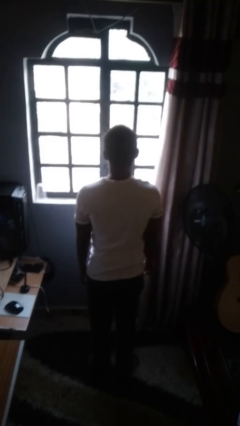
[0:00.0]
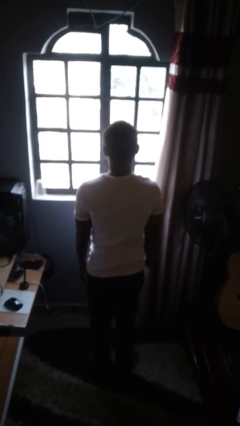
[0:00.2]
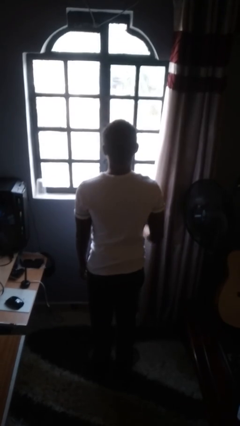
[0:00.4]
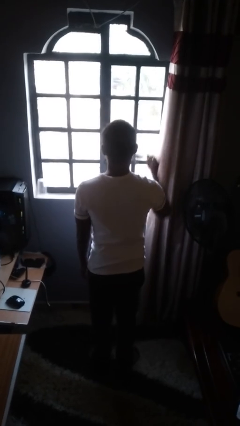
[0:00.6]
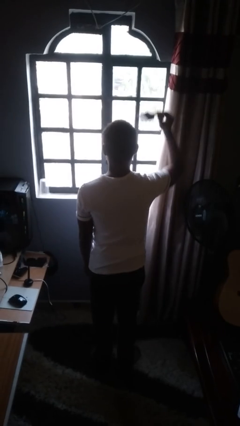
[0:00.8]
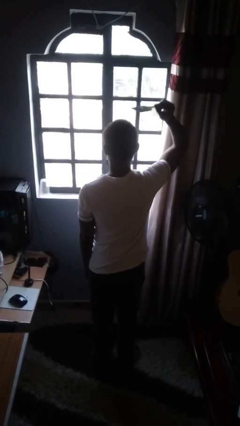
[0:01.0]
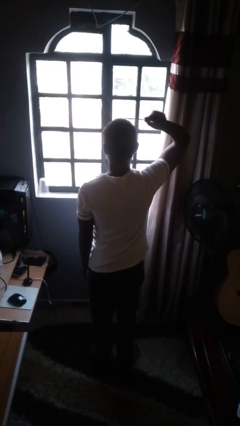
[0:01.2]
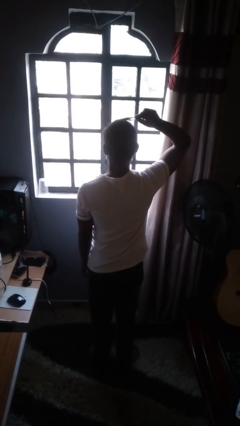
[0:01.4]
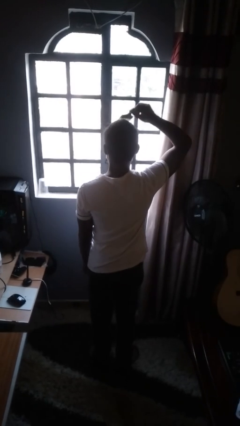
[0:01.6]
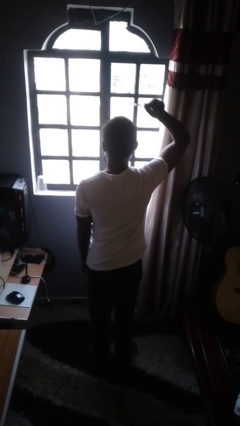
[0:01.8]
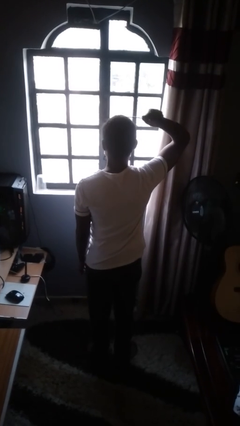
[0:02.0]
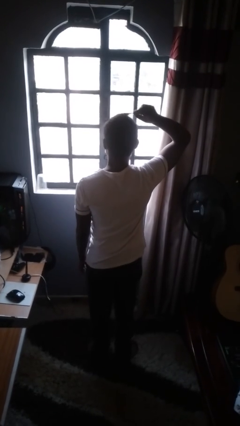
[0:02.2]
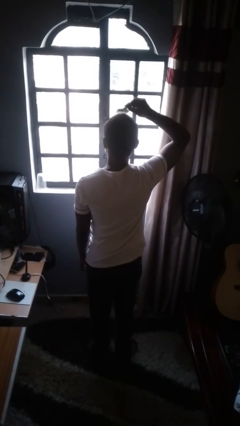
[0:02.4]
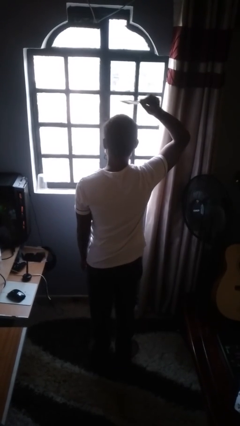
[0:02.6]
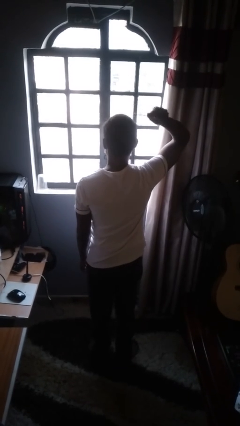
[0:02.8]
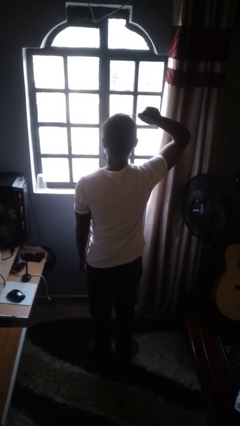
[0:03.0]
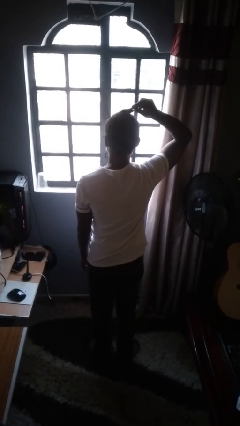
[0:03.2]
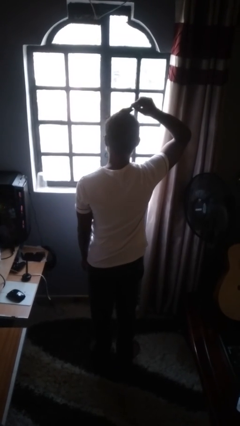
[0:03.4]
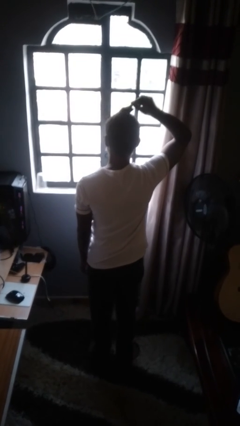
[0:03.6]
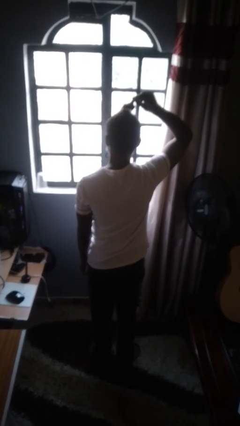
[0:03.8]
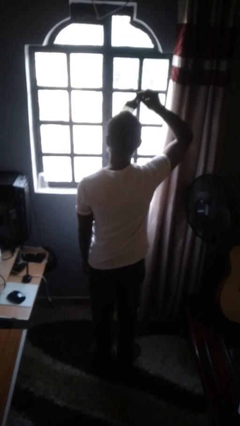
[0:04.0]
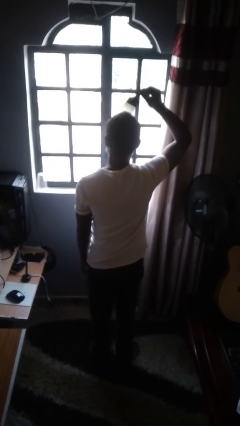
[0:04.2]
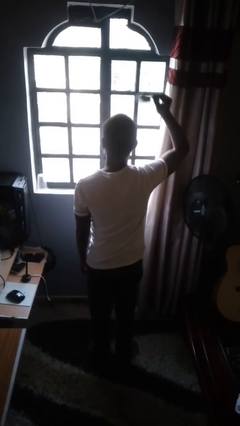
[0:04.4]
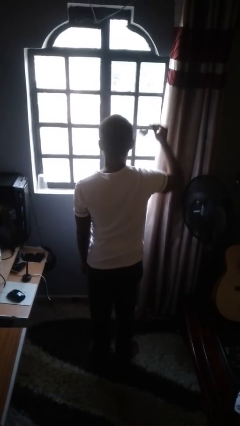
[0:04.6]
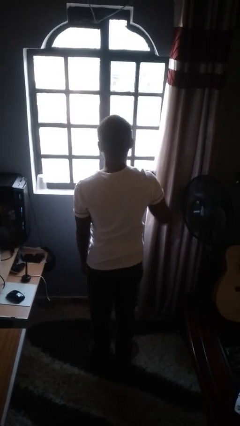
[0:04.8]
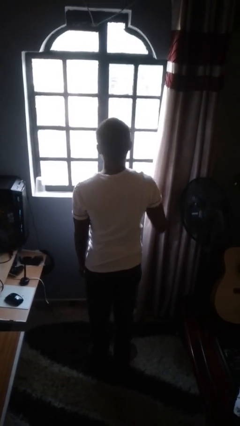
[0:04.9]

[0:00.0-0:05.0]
person brushes hair

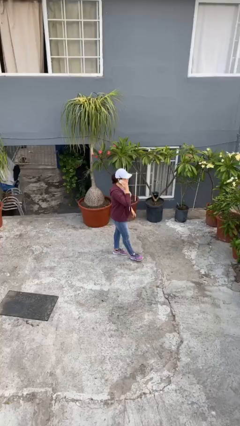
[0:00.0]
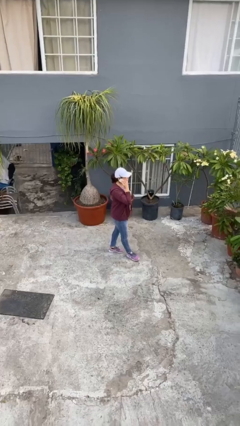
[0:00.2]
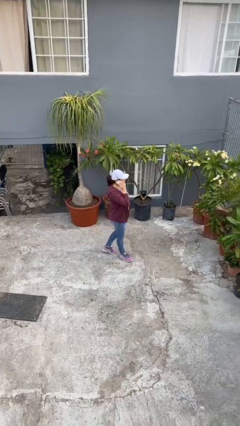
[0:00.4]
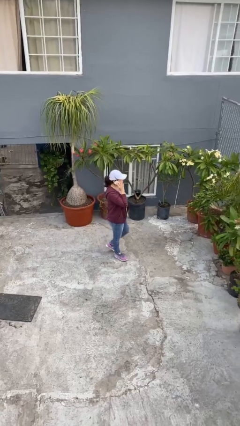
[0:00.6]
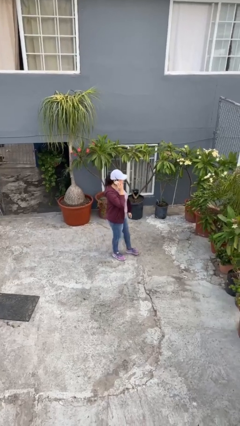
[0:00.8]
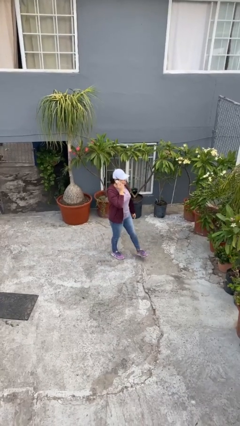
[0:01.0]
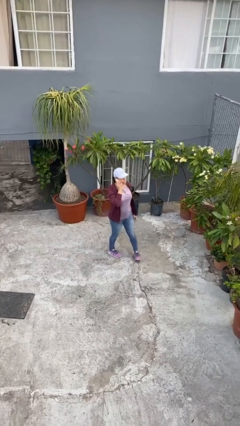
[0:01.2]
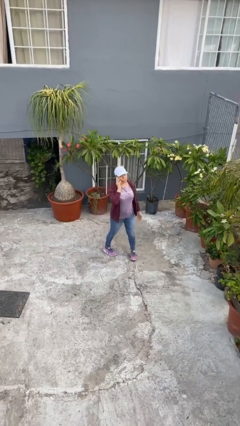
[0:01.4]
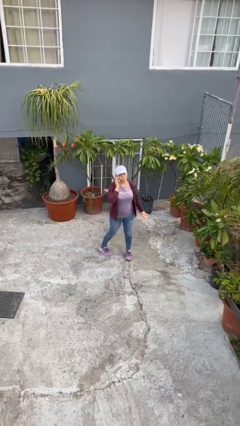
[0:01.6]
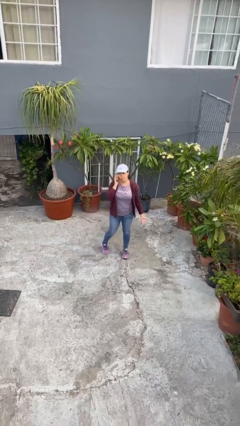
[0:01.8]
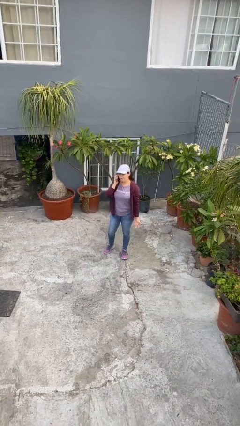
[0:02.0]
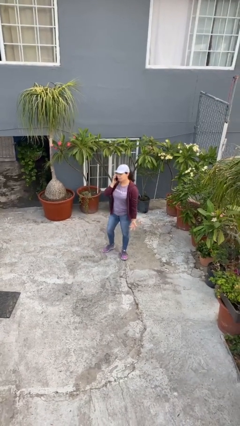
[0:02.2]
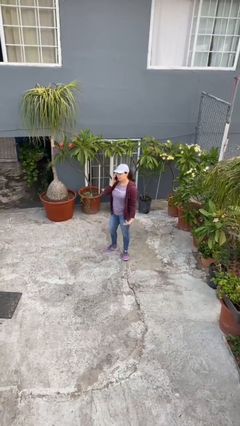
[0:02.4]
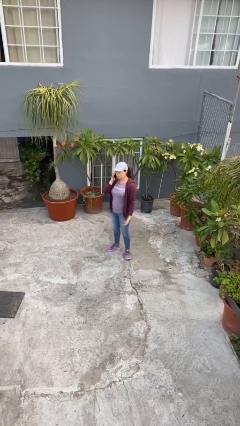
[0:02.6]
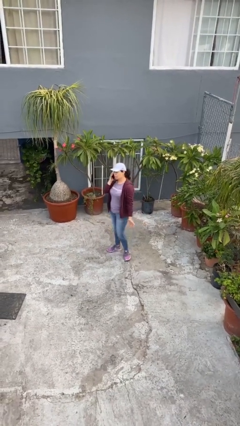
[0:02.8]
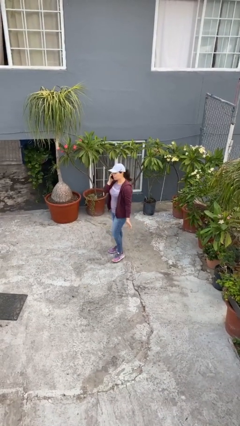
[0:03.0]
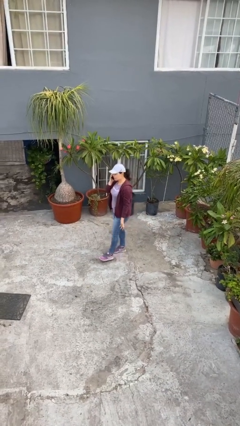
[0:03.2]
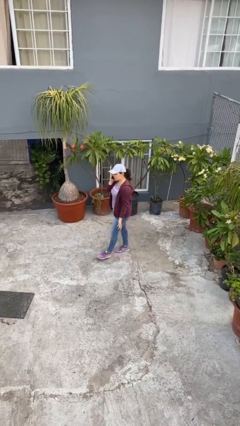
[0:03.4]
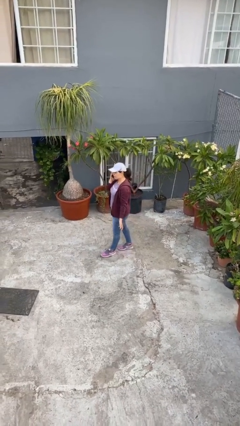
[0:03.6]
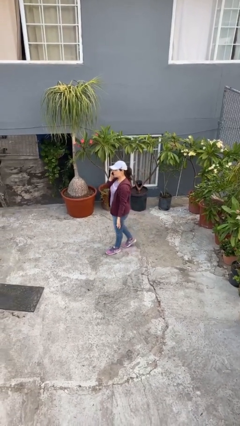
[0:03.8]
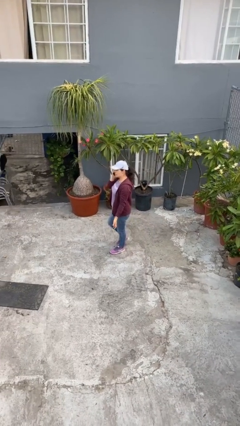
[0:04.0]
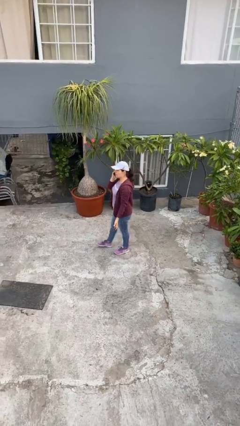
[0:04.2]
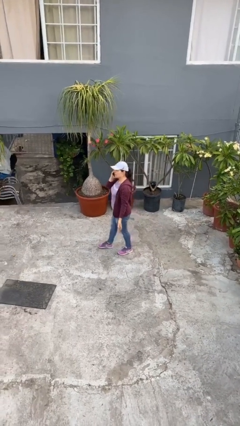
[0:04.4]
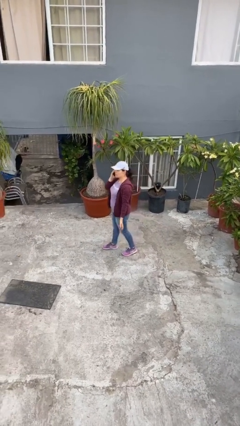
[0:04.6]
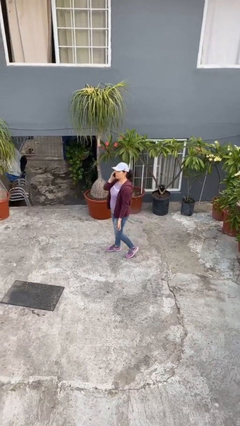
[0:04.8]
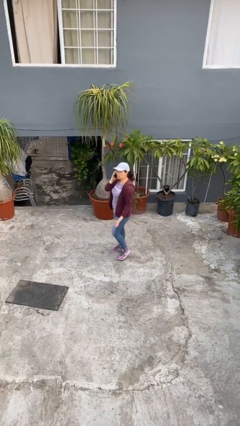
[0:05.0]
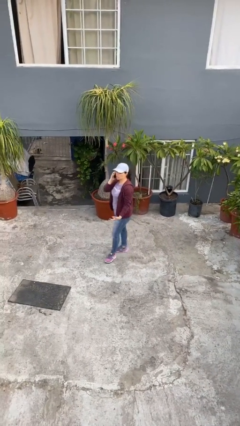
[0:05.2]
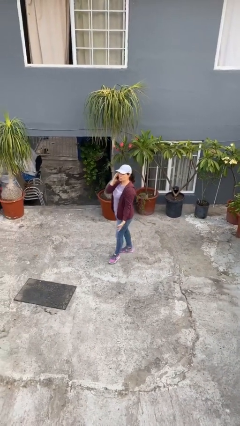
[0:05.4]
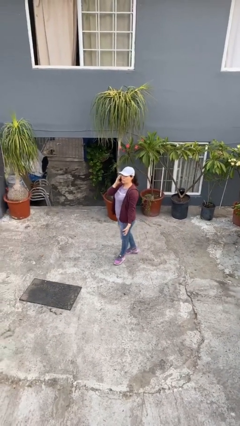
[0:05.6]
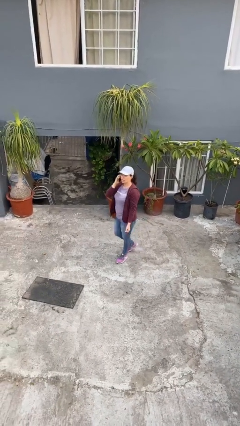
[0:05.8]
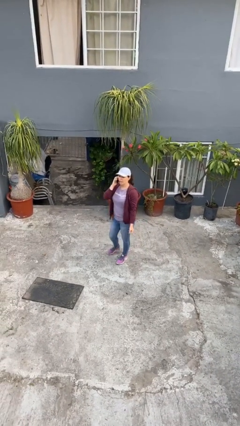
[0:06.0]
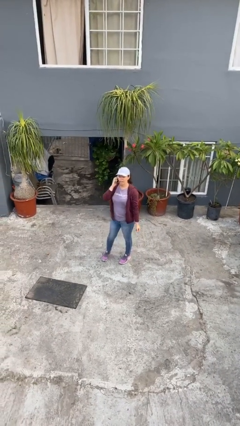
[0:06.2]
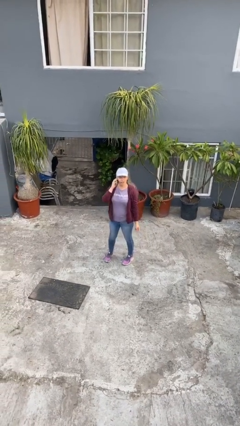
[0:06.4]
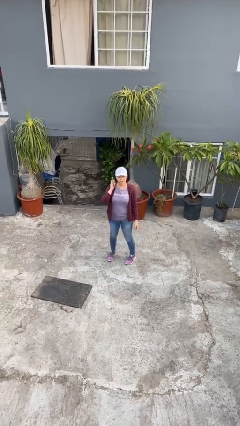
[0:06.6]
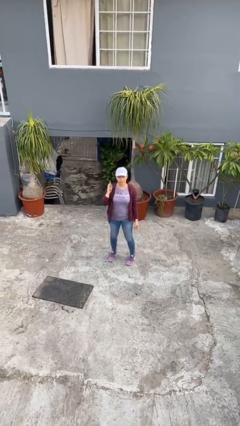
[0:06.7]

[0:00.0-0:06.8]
person talks on phone

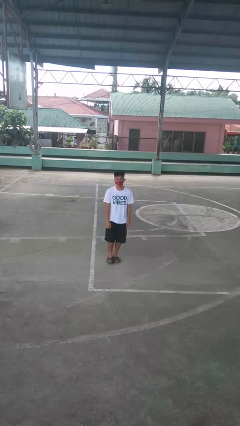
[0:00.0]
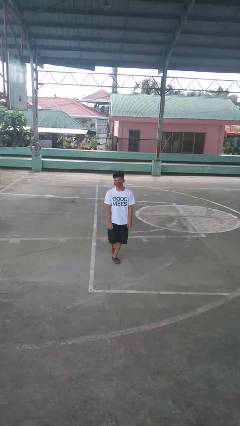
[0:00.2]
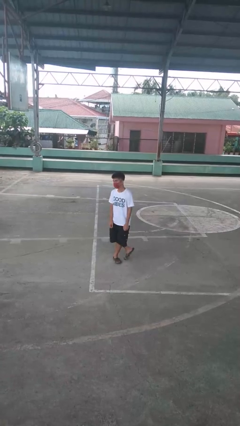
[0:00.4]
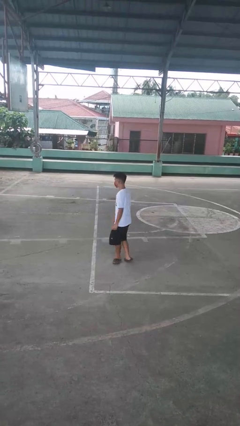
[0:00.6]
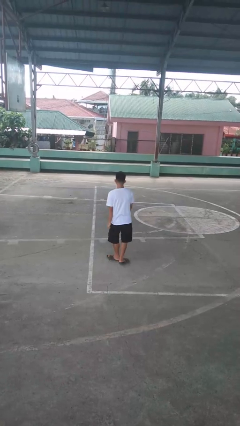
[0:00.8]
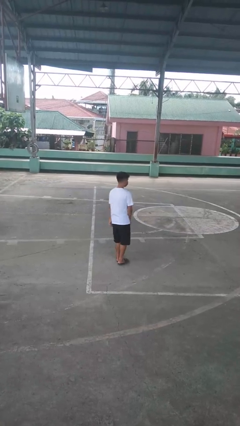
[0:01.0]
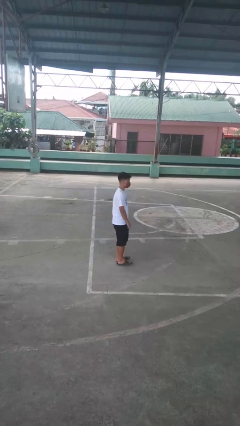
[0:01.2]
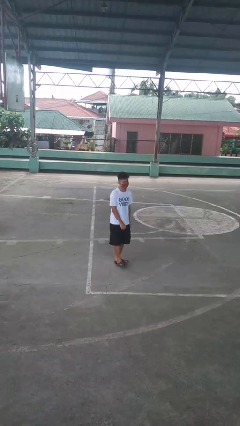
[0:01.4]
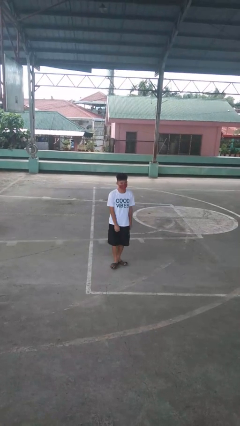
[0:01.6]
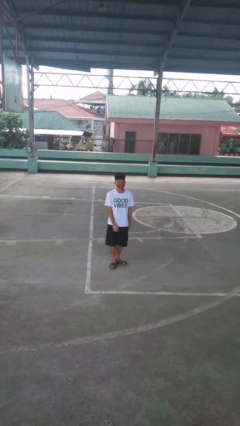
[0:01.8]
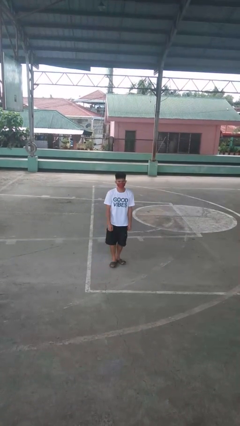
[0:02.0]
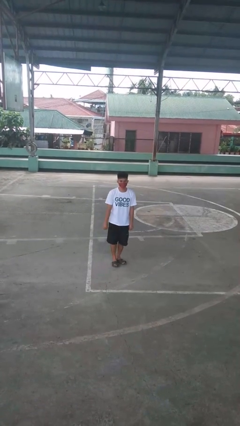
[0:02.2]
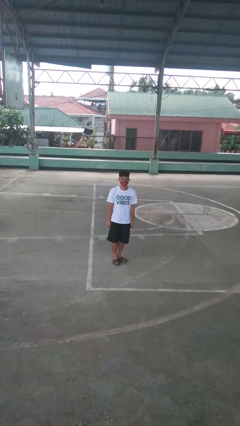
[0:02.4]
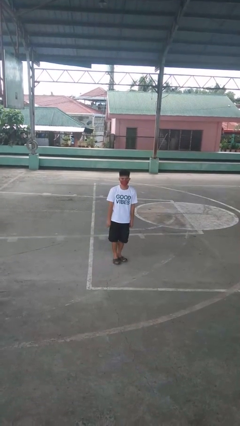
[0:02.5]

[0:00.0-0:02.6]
person twirls

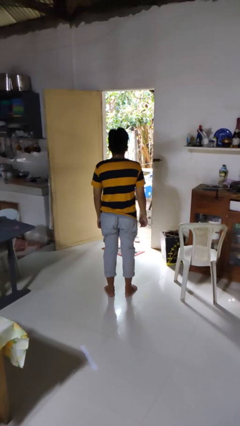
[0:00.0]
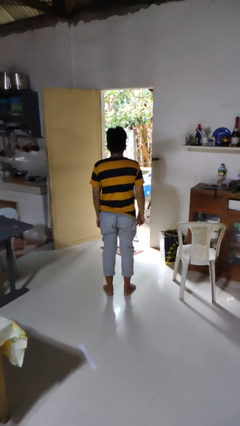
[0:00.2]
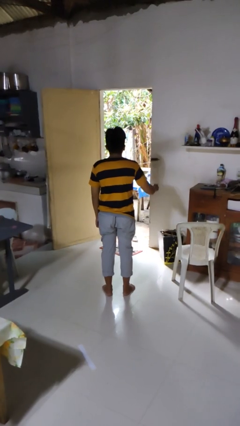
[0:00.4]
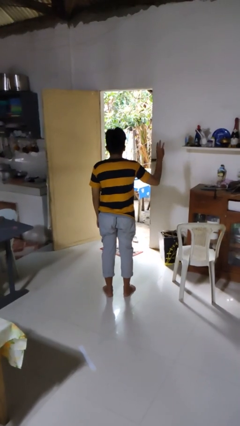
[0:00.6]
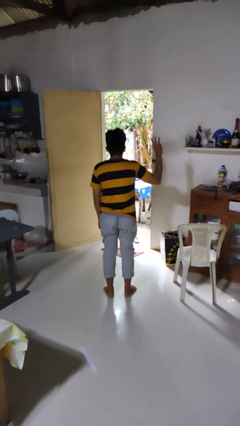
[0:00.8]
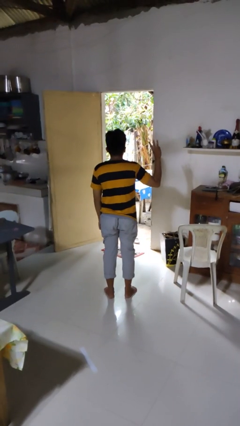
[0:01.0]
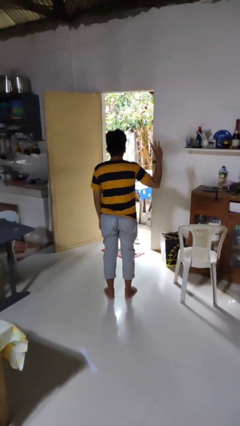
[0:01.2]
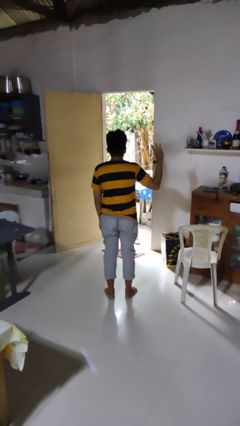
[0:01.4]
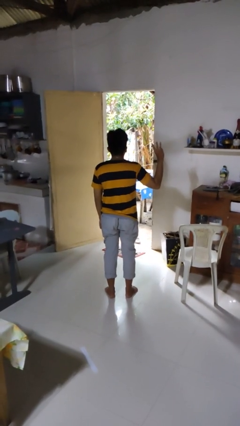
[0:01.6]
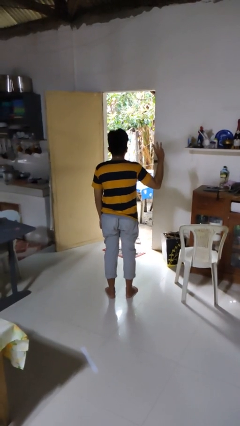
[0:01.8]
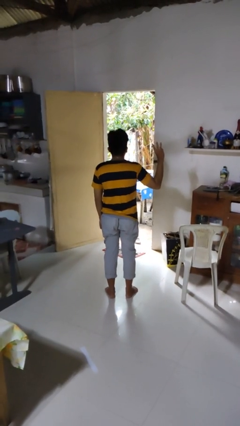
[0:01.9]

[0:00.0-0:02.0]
person gestures number three

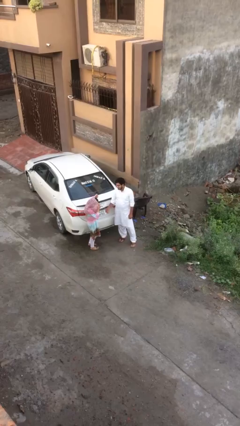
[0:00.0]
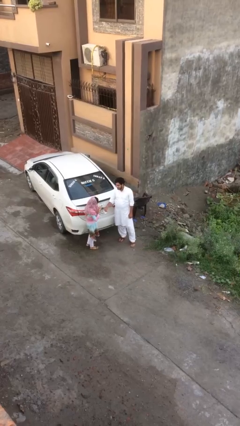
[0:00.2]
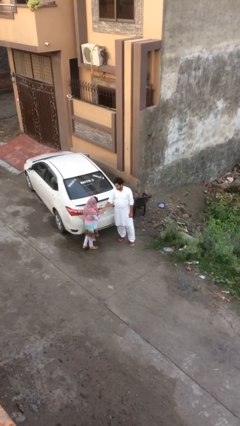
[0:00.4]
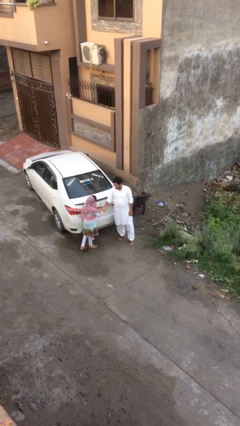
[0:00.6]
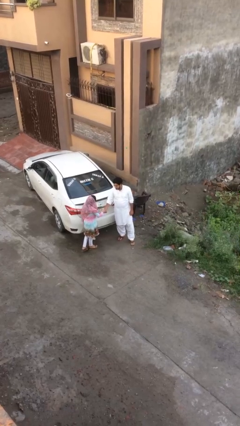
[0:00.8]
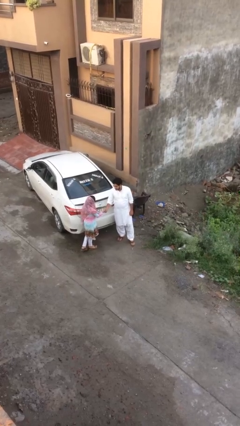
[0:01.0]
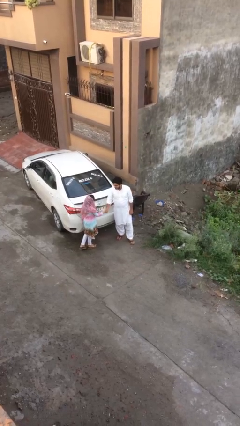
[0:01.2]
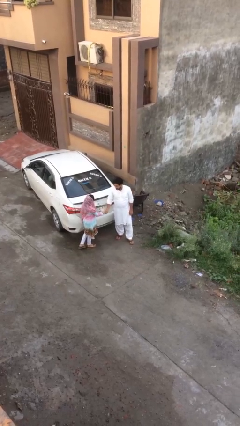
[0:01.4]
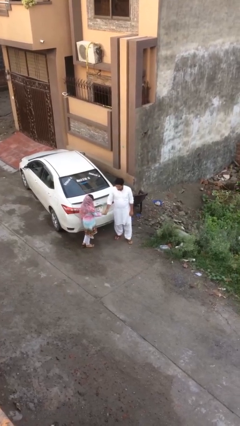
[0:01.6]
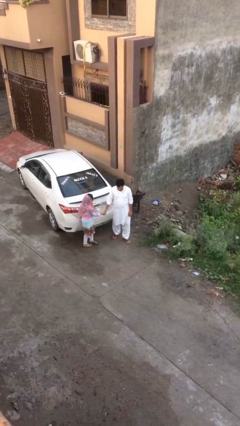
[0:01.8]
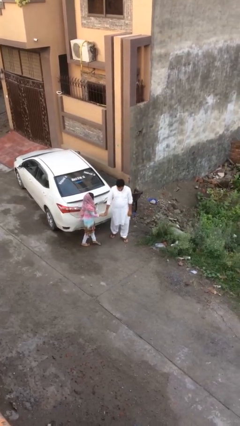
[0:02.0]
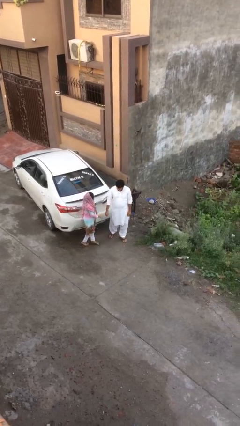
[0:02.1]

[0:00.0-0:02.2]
person shakes hand
